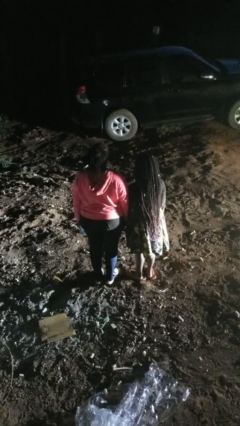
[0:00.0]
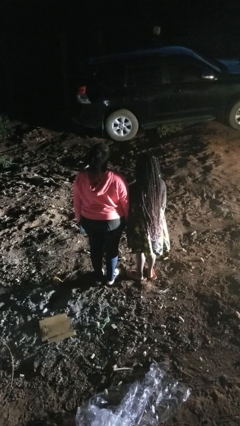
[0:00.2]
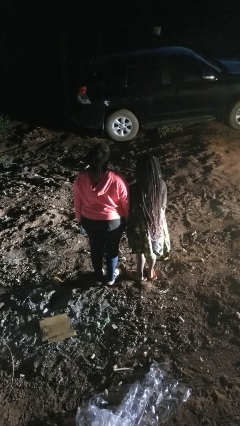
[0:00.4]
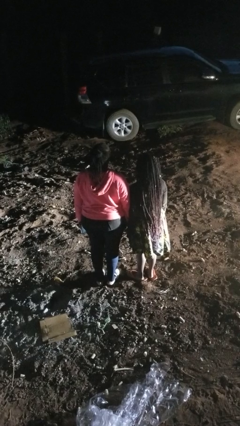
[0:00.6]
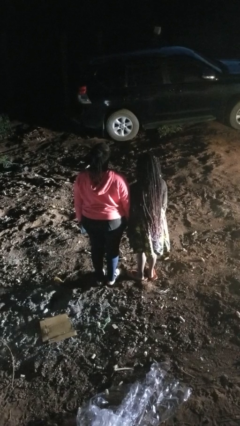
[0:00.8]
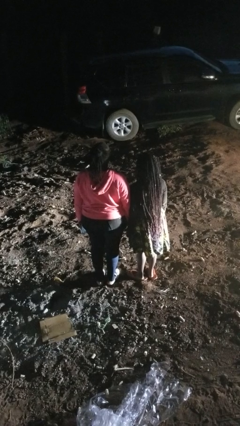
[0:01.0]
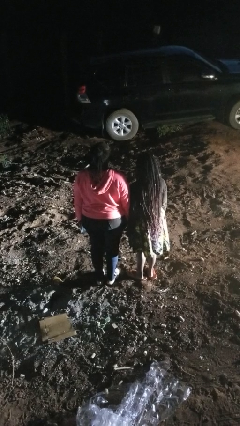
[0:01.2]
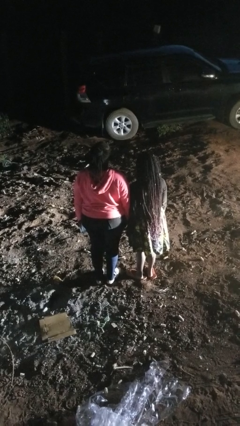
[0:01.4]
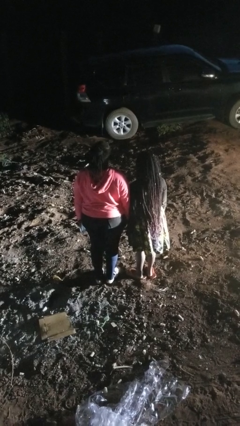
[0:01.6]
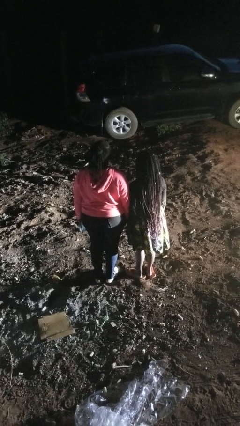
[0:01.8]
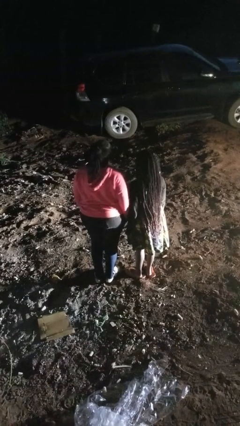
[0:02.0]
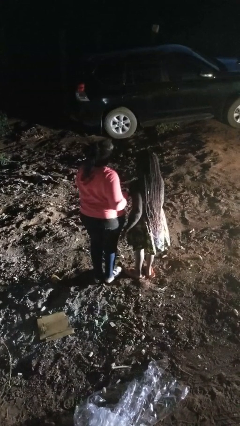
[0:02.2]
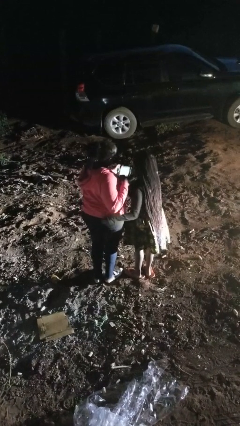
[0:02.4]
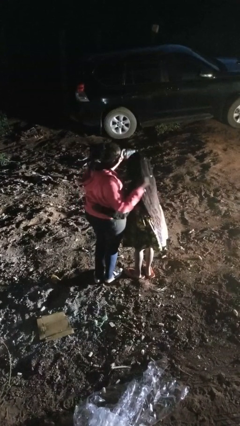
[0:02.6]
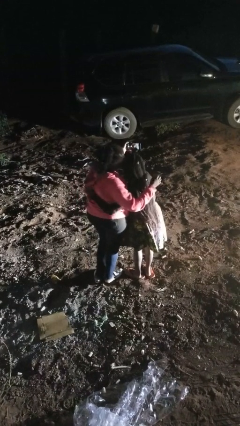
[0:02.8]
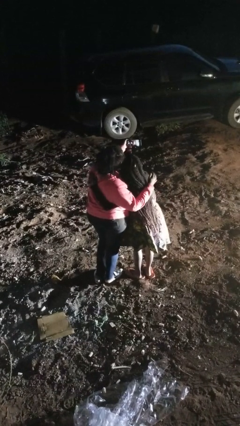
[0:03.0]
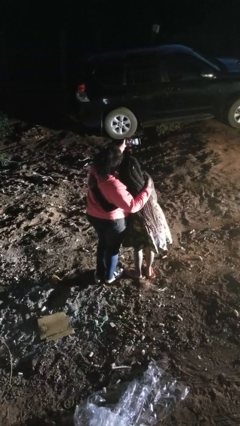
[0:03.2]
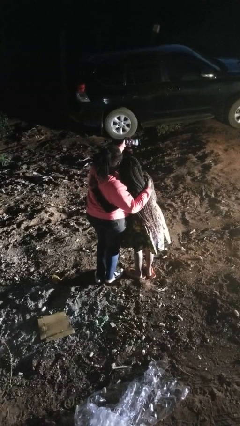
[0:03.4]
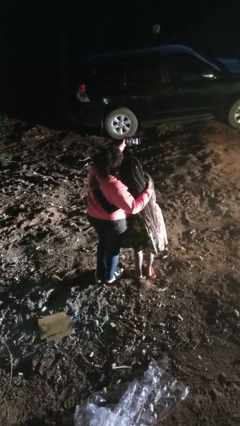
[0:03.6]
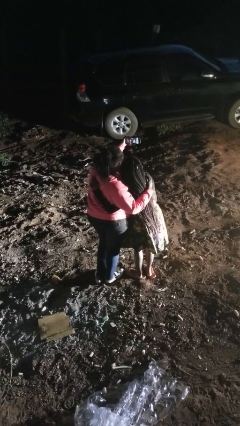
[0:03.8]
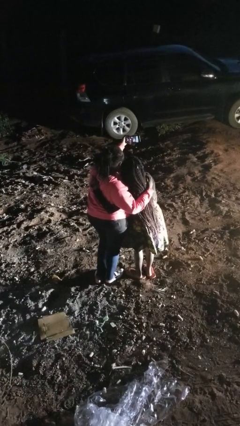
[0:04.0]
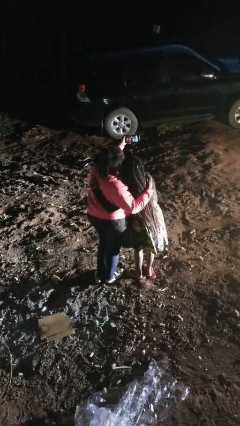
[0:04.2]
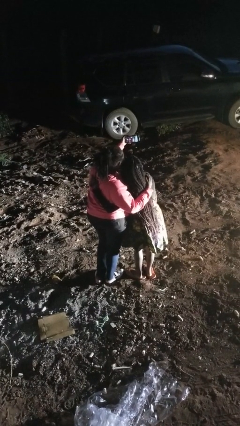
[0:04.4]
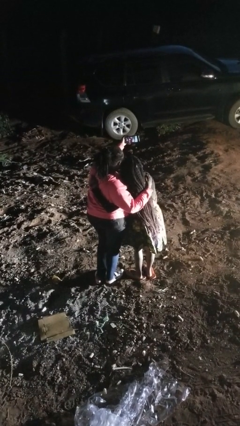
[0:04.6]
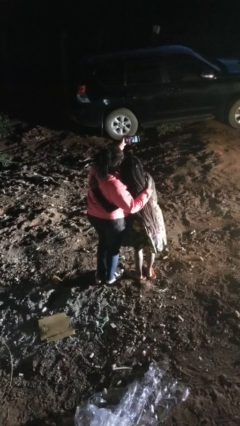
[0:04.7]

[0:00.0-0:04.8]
person takes selfie with person

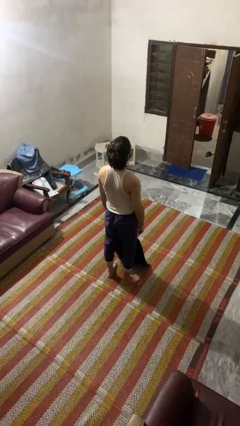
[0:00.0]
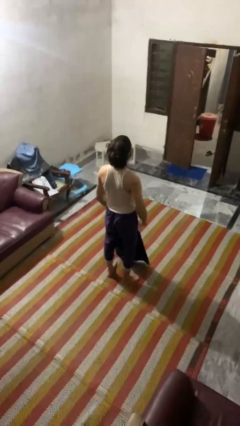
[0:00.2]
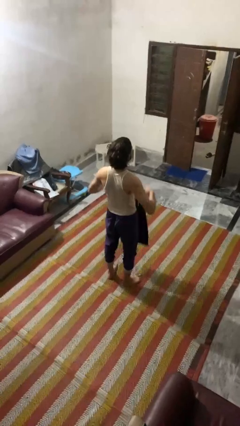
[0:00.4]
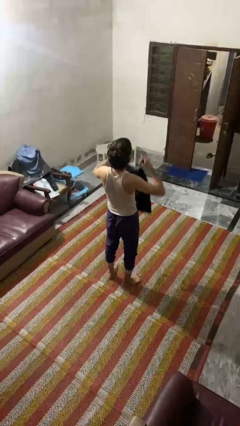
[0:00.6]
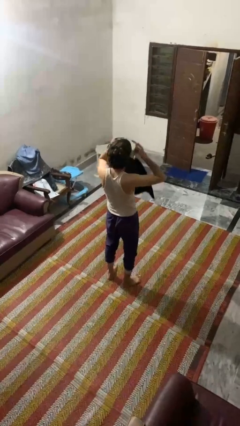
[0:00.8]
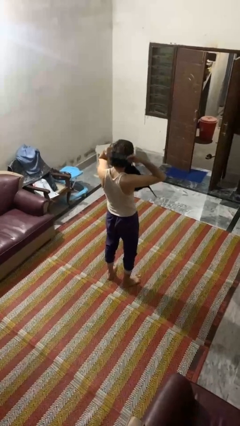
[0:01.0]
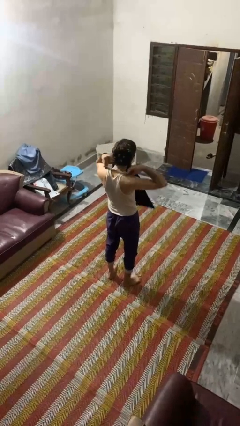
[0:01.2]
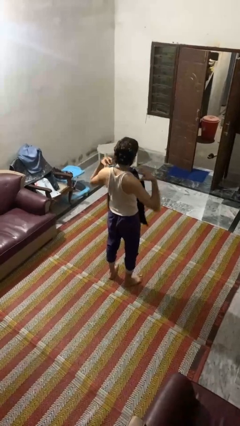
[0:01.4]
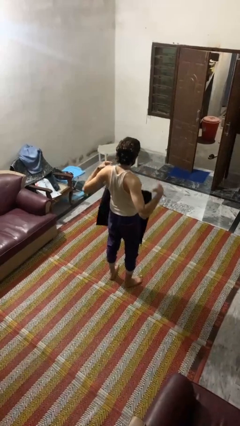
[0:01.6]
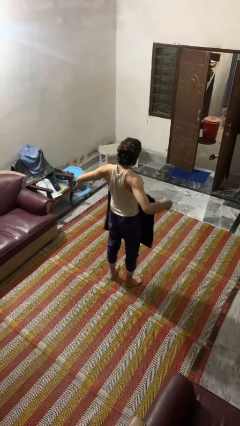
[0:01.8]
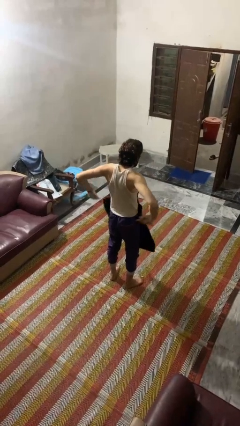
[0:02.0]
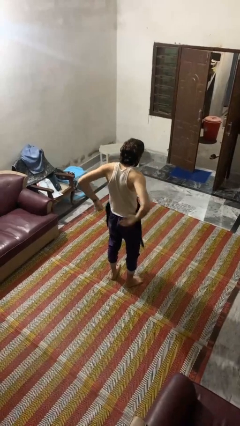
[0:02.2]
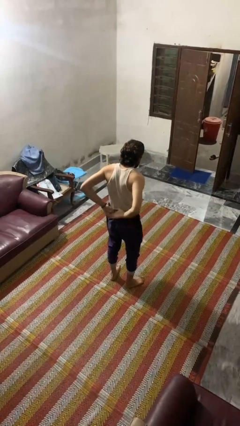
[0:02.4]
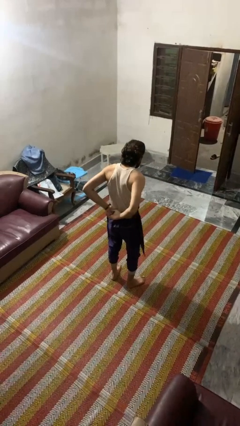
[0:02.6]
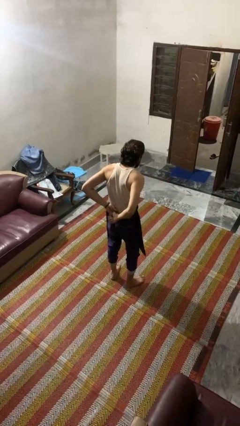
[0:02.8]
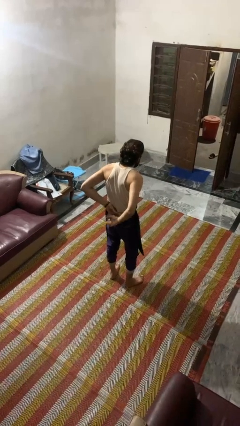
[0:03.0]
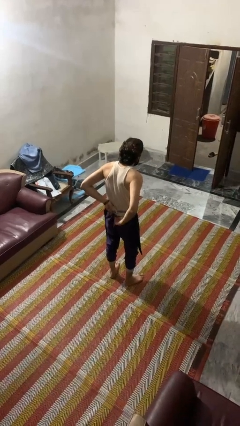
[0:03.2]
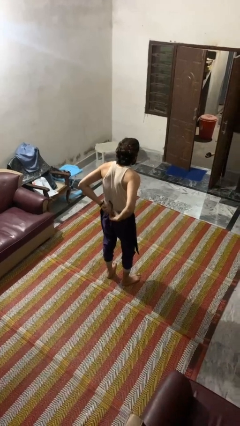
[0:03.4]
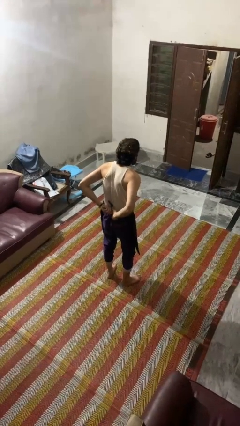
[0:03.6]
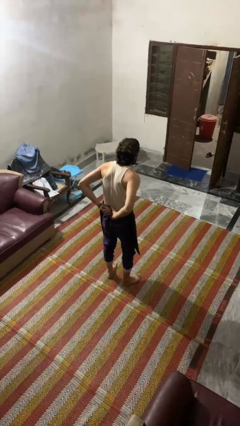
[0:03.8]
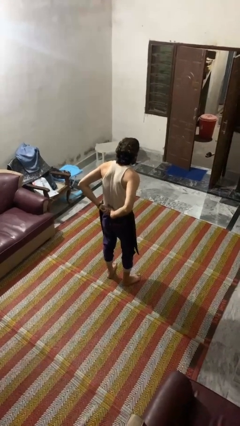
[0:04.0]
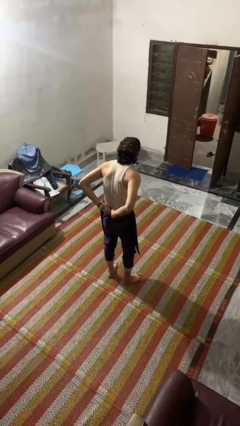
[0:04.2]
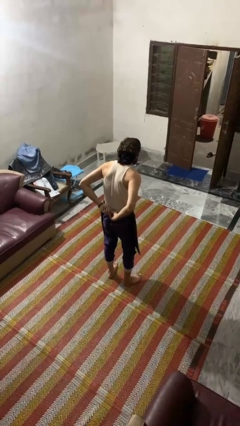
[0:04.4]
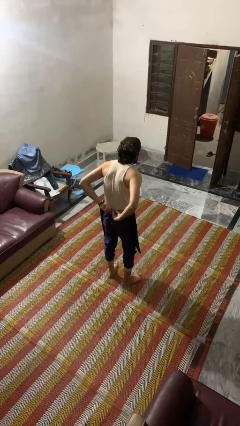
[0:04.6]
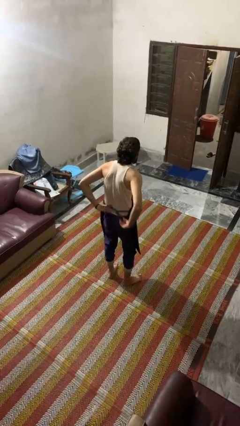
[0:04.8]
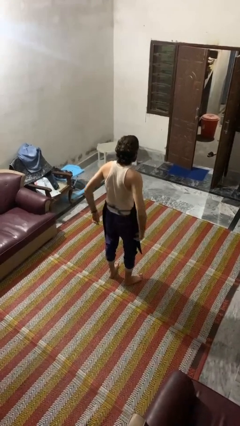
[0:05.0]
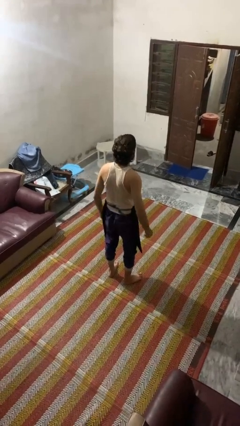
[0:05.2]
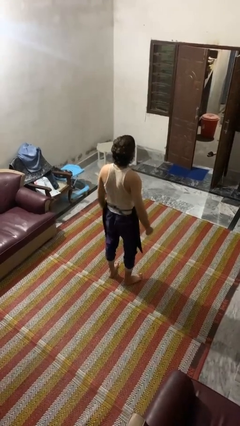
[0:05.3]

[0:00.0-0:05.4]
person puts on apron

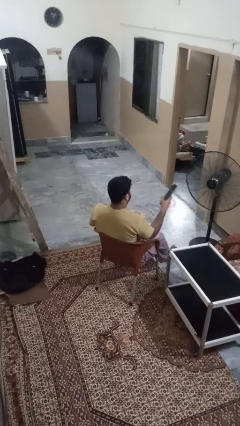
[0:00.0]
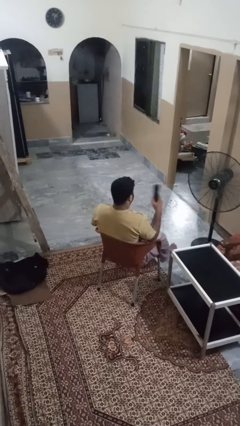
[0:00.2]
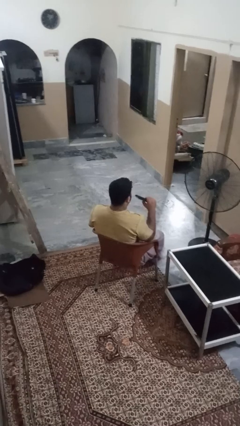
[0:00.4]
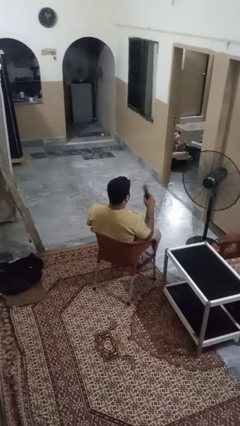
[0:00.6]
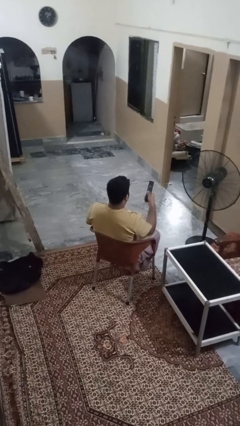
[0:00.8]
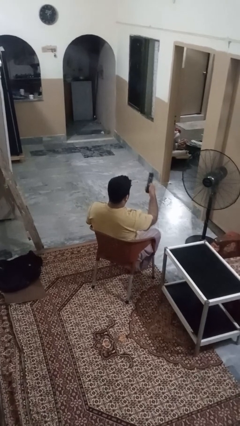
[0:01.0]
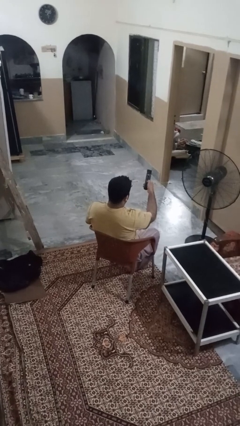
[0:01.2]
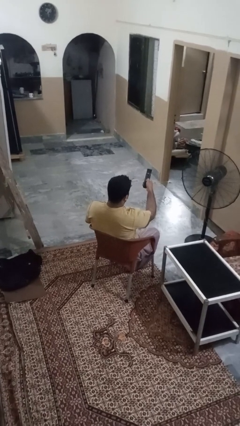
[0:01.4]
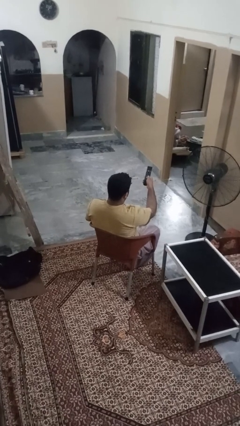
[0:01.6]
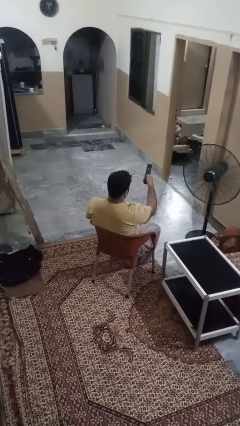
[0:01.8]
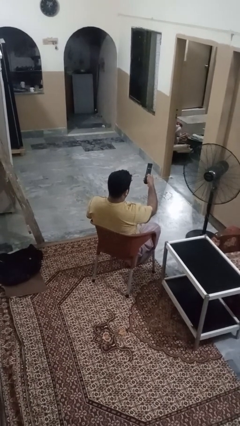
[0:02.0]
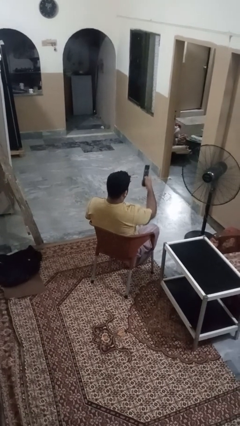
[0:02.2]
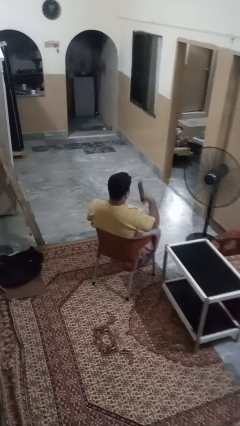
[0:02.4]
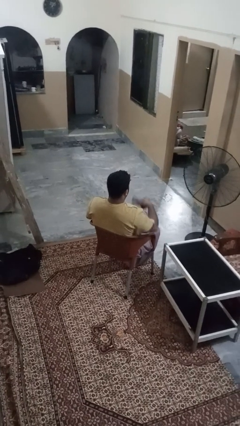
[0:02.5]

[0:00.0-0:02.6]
person uses television remote

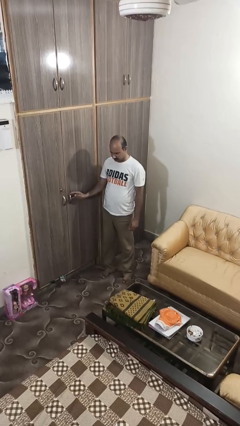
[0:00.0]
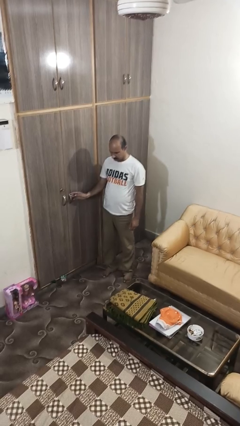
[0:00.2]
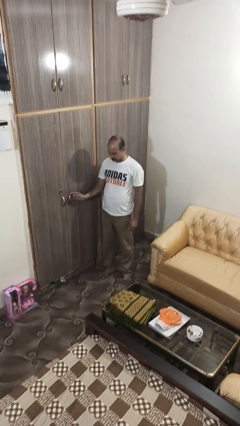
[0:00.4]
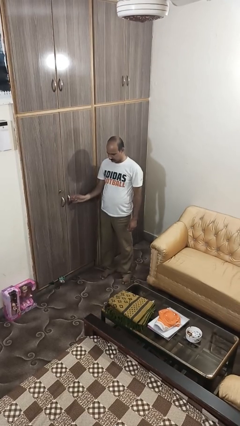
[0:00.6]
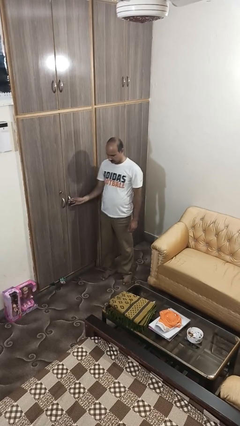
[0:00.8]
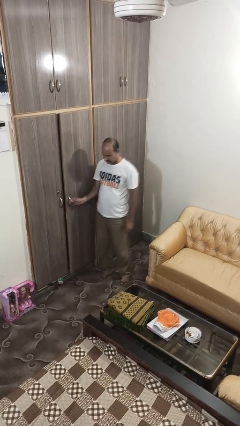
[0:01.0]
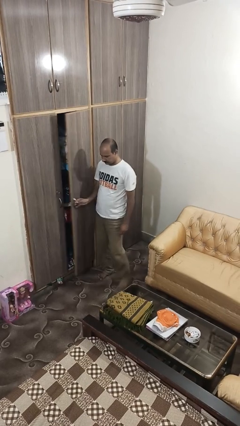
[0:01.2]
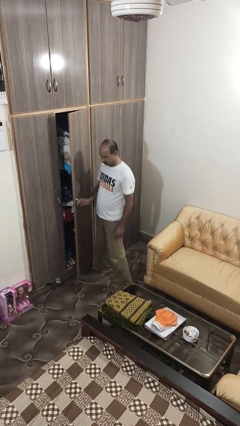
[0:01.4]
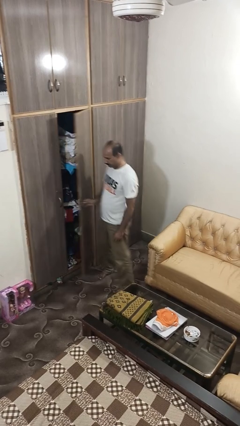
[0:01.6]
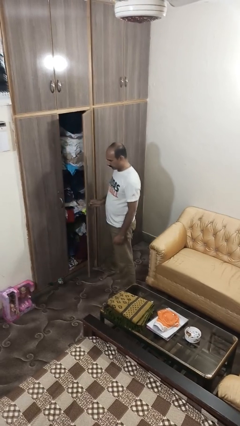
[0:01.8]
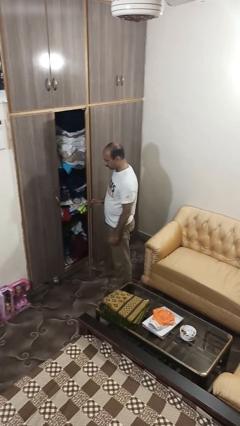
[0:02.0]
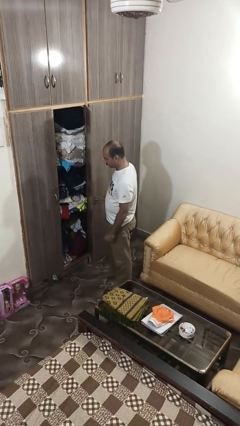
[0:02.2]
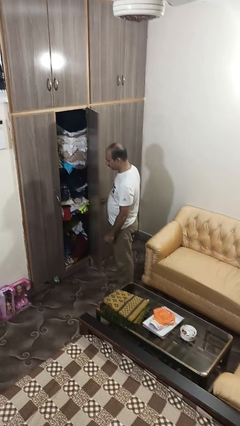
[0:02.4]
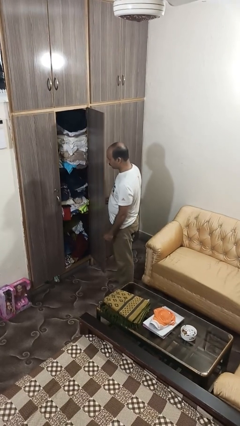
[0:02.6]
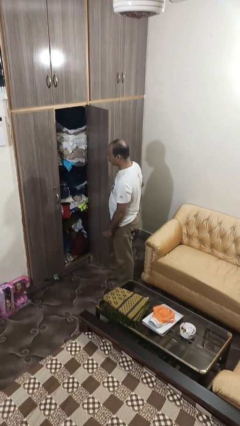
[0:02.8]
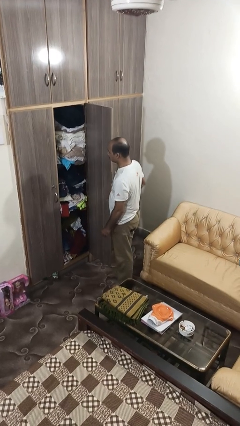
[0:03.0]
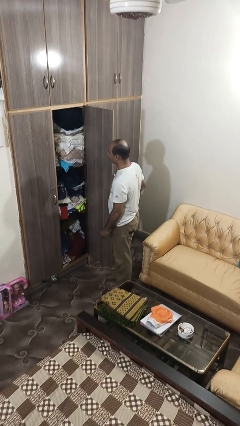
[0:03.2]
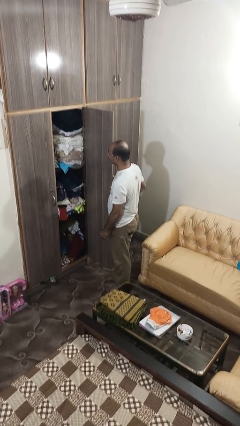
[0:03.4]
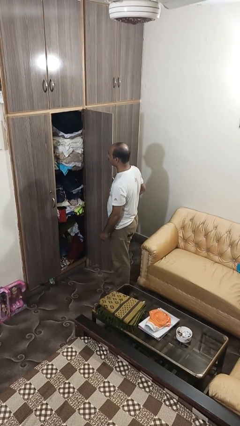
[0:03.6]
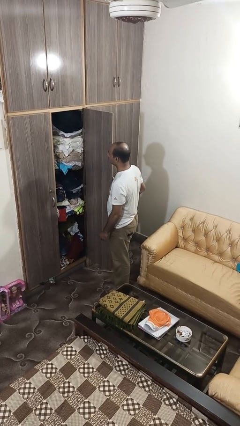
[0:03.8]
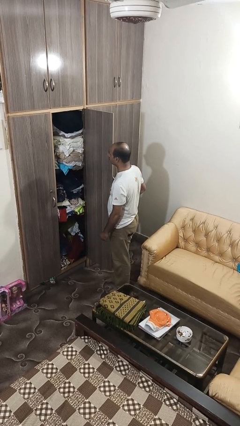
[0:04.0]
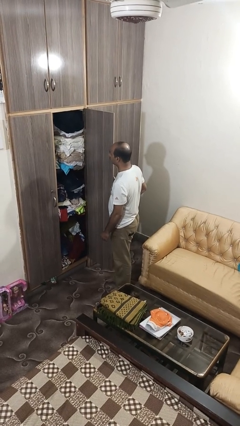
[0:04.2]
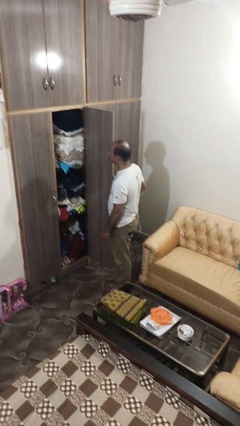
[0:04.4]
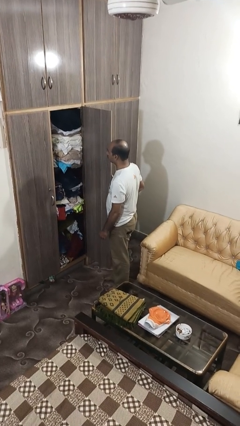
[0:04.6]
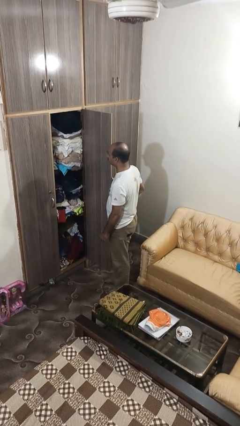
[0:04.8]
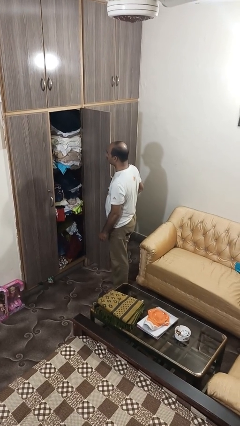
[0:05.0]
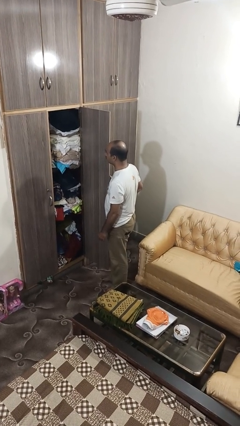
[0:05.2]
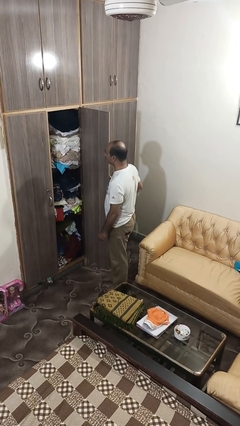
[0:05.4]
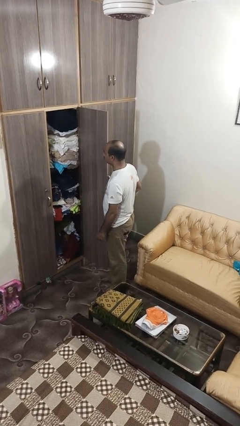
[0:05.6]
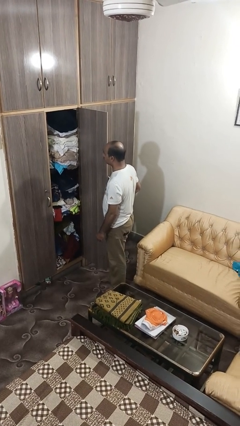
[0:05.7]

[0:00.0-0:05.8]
person opens closet door
